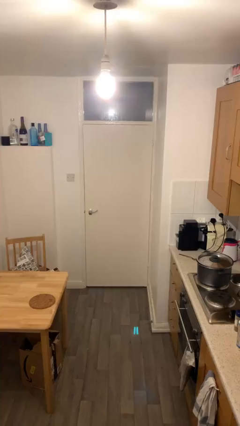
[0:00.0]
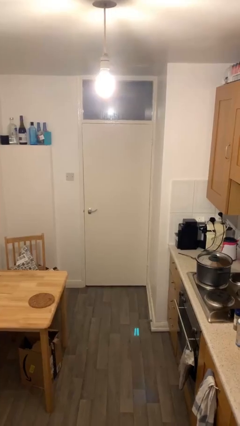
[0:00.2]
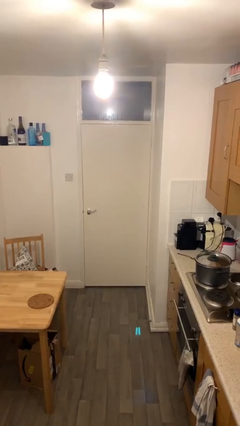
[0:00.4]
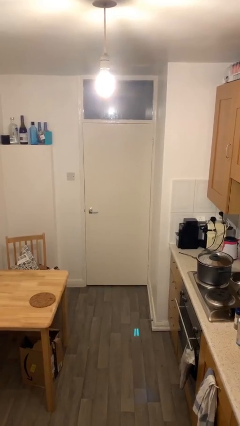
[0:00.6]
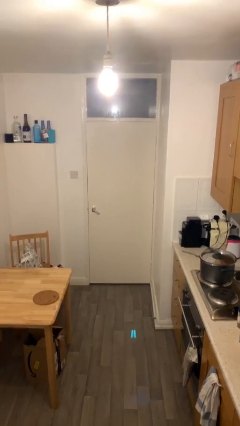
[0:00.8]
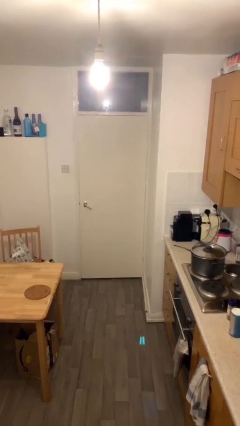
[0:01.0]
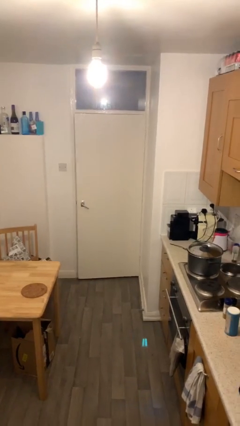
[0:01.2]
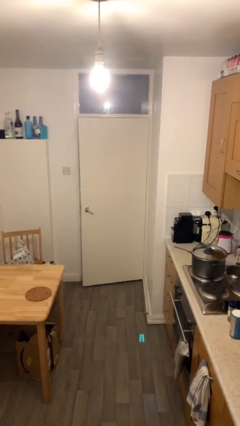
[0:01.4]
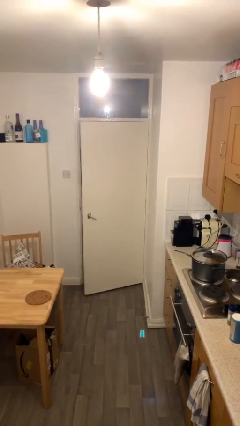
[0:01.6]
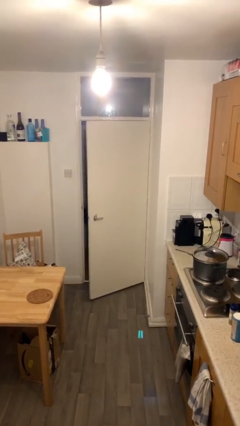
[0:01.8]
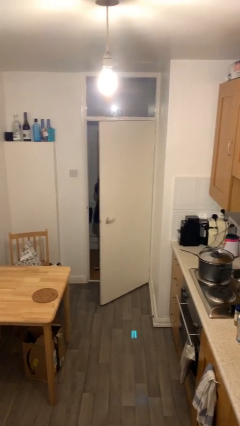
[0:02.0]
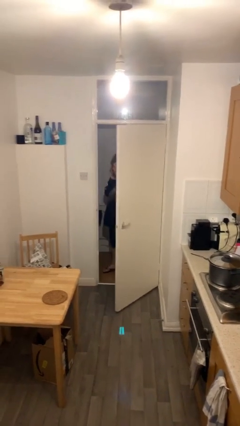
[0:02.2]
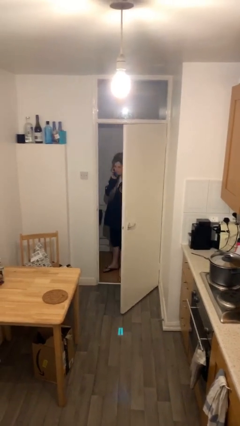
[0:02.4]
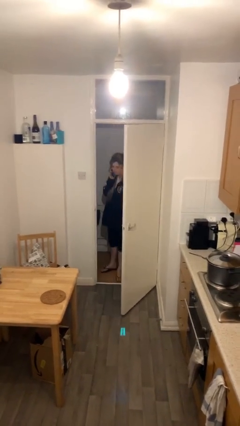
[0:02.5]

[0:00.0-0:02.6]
person opens facility door

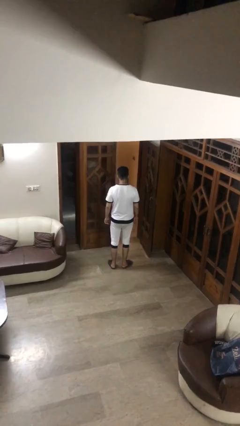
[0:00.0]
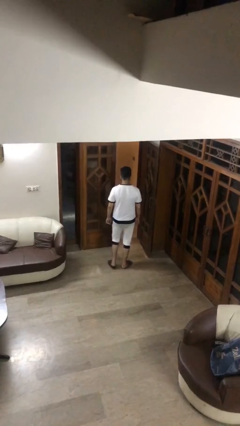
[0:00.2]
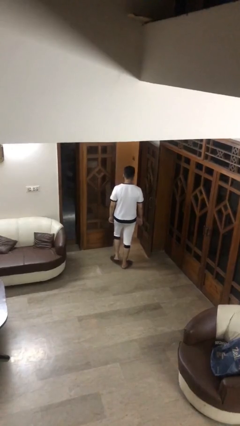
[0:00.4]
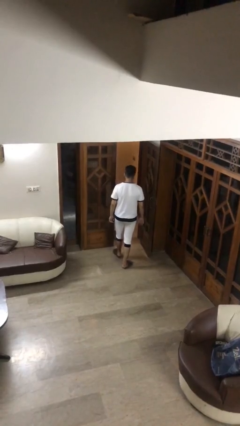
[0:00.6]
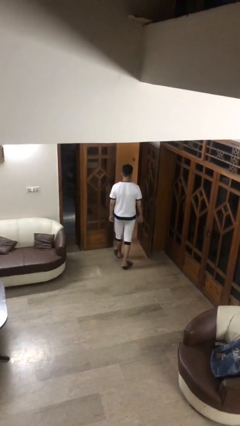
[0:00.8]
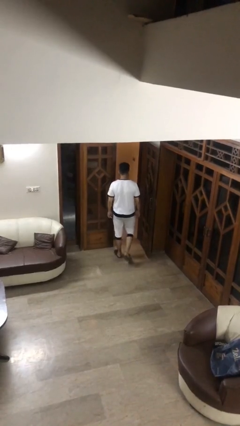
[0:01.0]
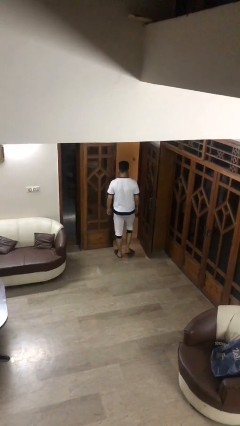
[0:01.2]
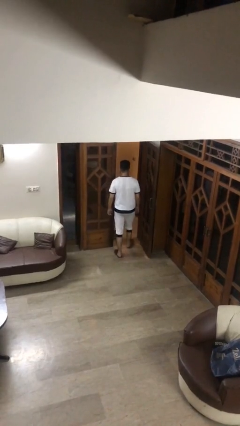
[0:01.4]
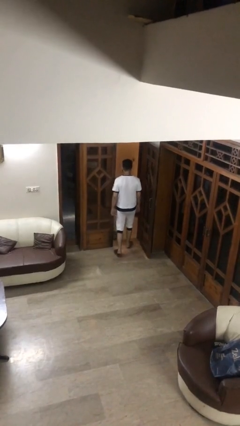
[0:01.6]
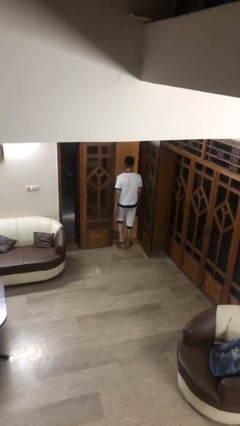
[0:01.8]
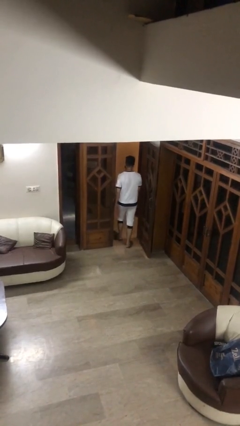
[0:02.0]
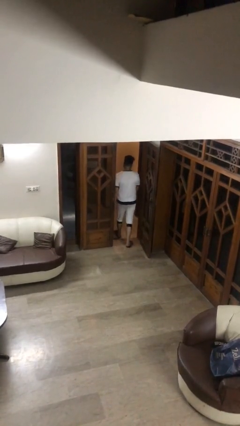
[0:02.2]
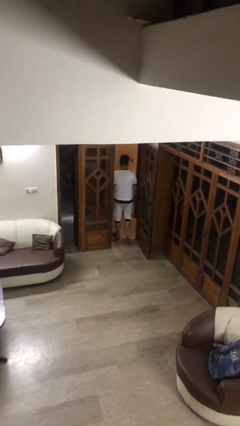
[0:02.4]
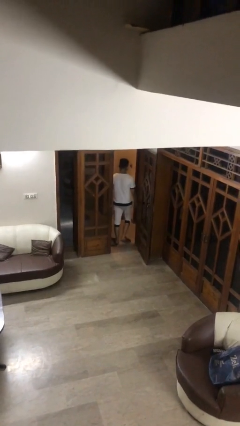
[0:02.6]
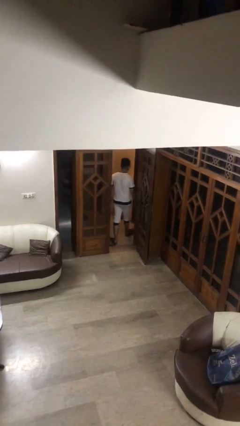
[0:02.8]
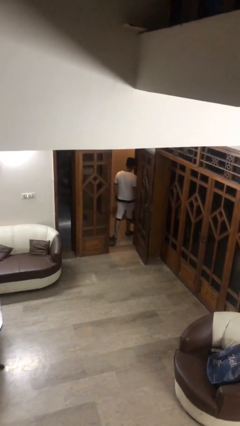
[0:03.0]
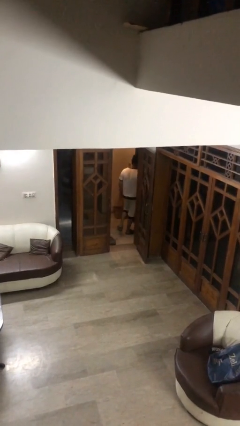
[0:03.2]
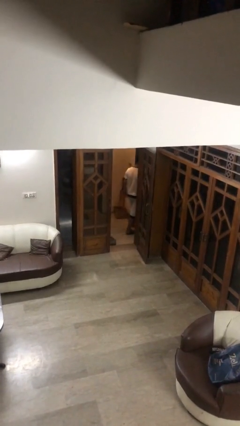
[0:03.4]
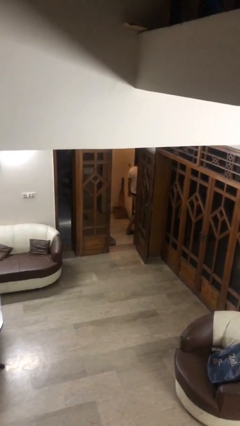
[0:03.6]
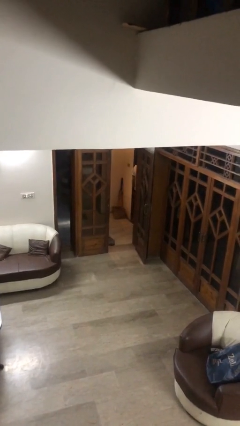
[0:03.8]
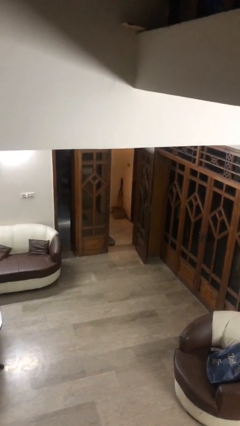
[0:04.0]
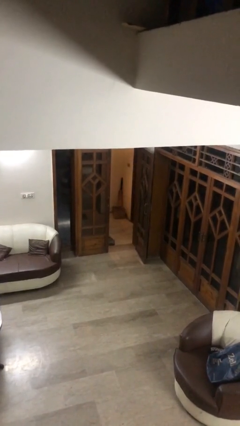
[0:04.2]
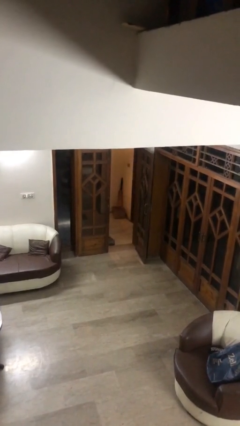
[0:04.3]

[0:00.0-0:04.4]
person exits scene through structure

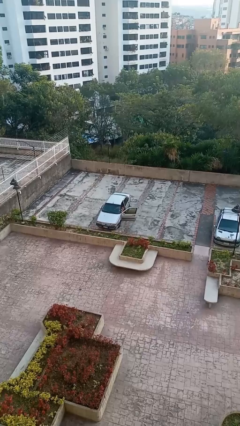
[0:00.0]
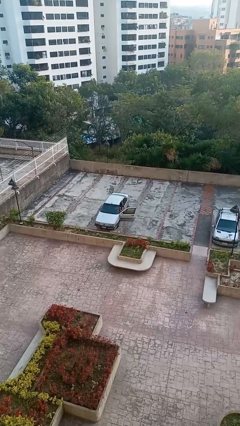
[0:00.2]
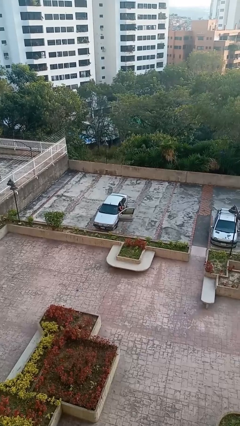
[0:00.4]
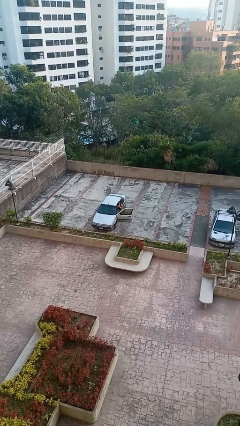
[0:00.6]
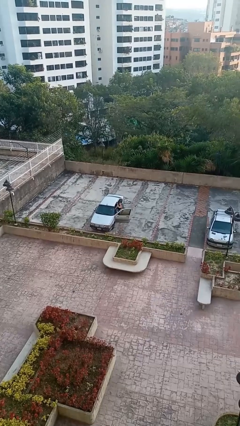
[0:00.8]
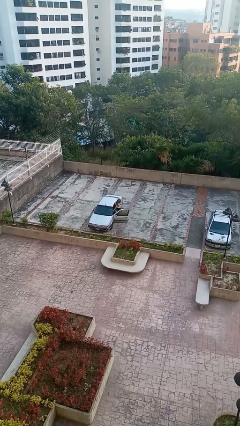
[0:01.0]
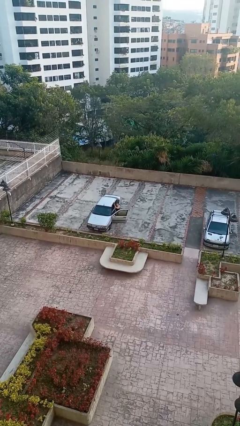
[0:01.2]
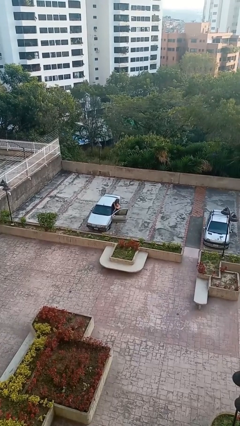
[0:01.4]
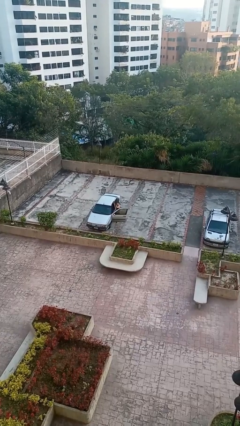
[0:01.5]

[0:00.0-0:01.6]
person exits car

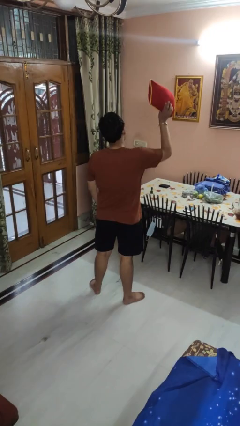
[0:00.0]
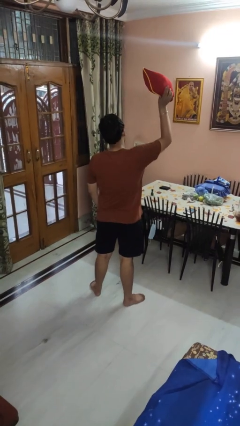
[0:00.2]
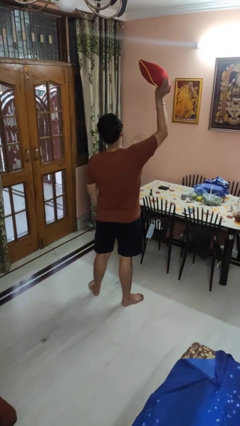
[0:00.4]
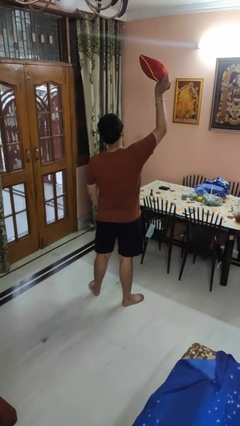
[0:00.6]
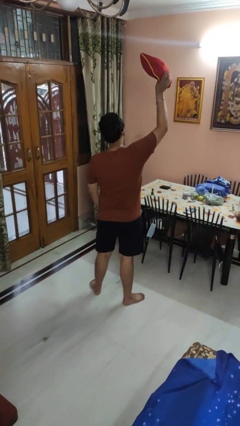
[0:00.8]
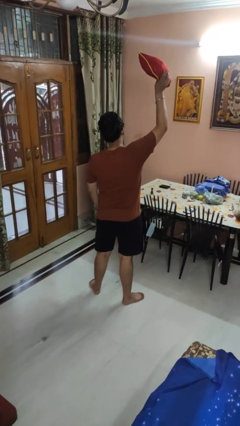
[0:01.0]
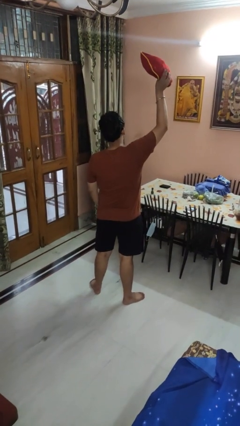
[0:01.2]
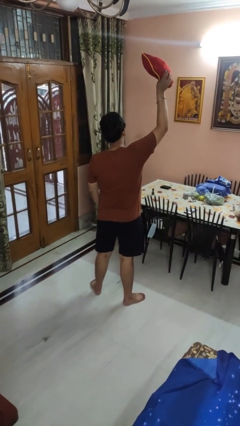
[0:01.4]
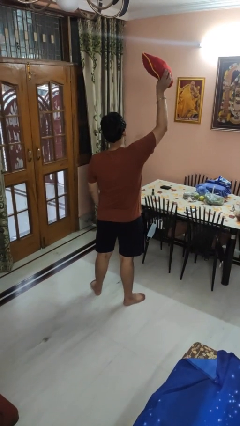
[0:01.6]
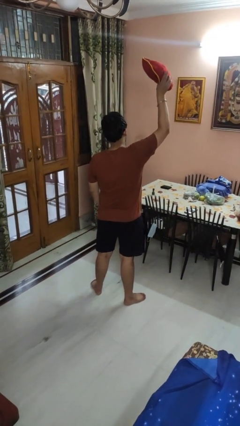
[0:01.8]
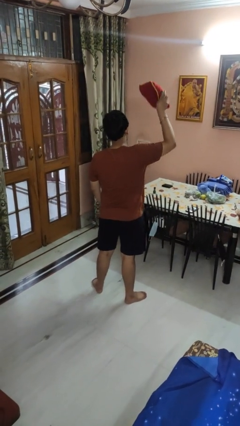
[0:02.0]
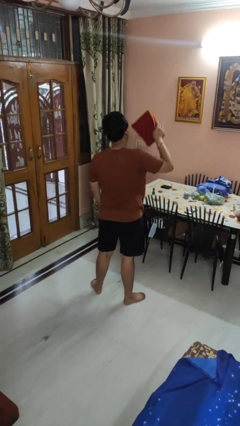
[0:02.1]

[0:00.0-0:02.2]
person holds object above head

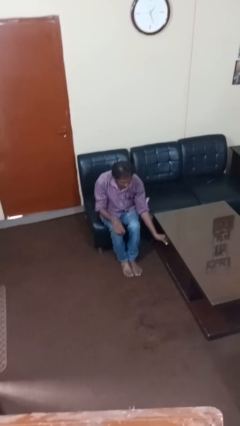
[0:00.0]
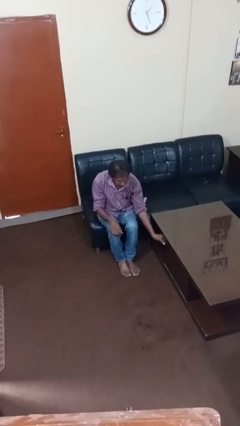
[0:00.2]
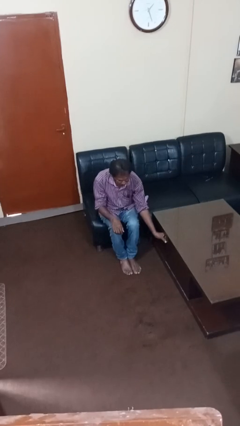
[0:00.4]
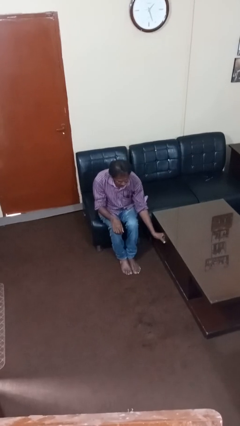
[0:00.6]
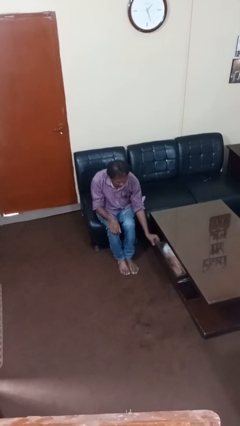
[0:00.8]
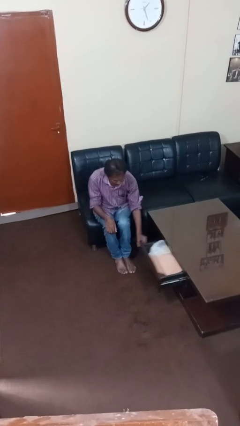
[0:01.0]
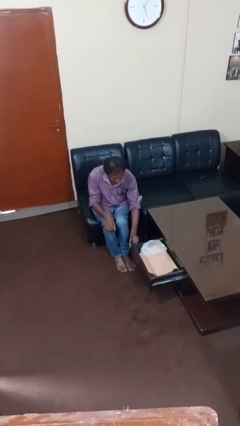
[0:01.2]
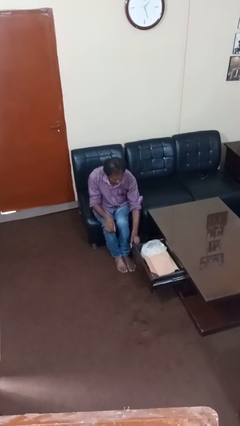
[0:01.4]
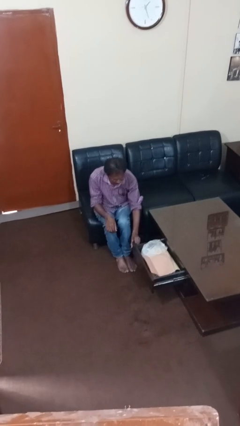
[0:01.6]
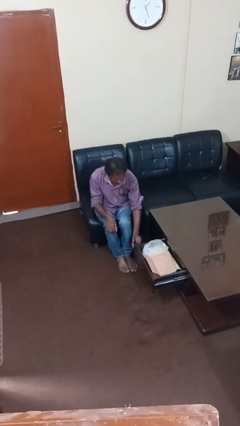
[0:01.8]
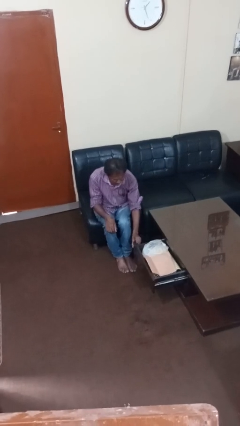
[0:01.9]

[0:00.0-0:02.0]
person opens dresser drawer

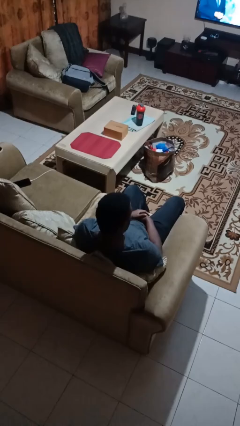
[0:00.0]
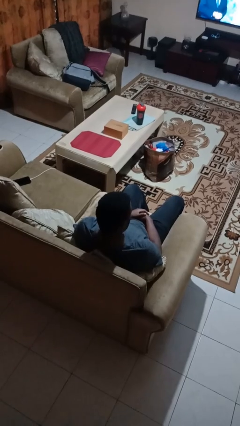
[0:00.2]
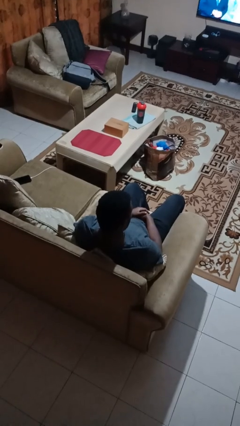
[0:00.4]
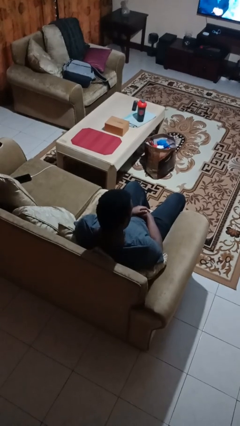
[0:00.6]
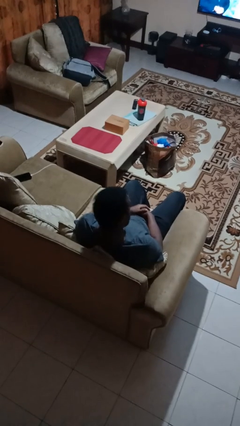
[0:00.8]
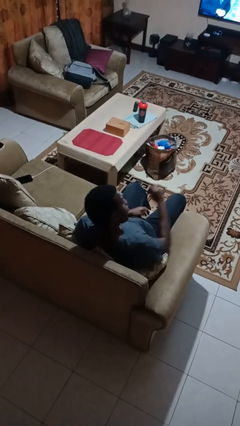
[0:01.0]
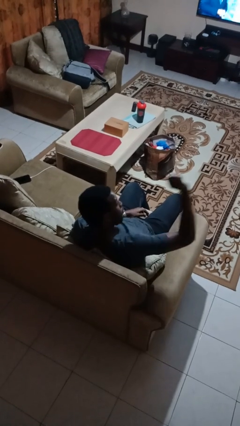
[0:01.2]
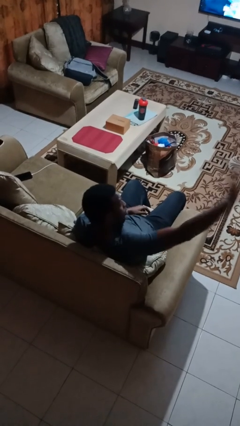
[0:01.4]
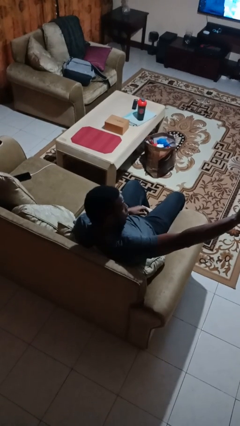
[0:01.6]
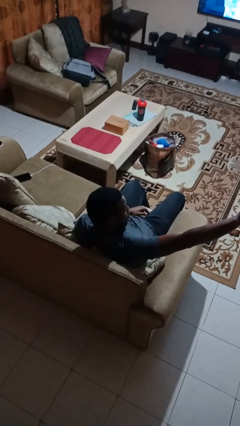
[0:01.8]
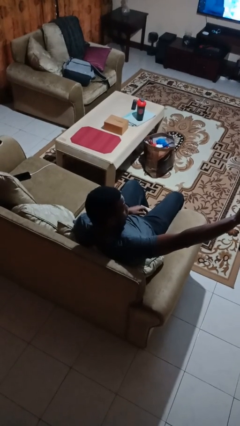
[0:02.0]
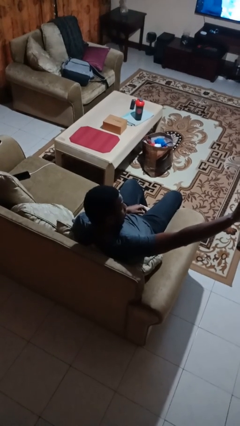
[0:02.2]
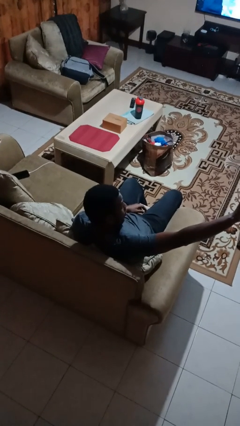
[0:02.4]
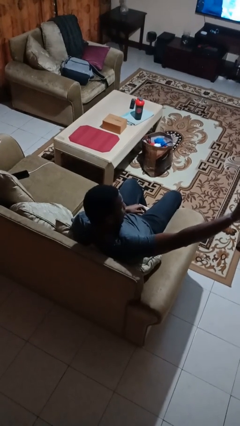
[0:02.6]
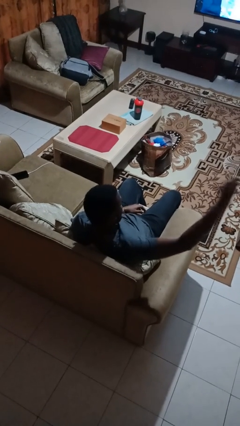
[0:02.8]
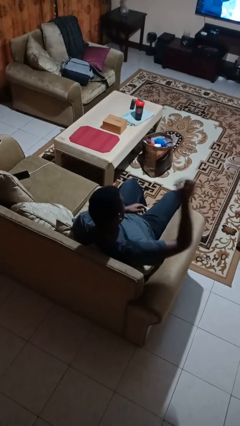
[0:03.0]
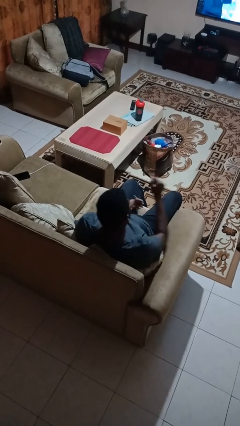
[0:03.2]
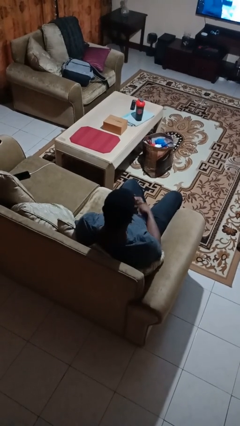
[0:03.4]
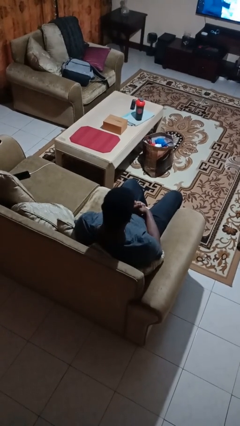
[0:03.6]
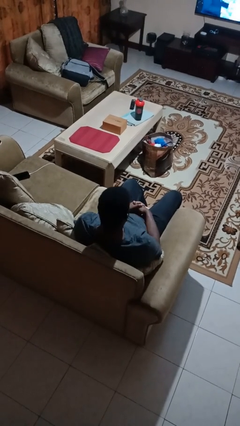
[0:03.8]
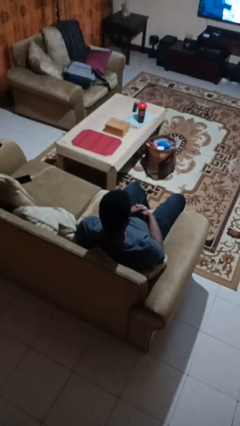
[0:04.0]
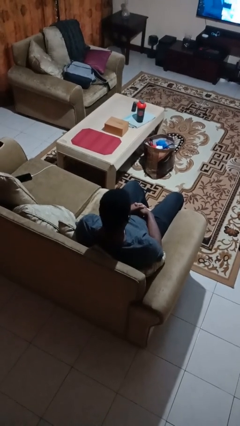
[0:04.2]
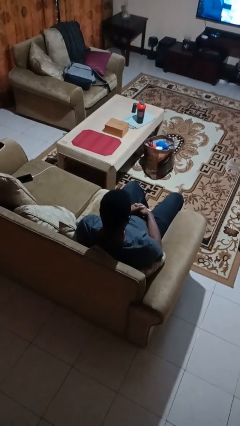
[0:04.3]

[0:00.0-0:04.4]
person gestures stop
